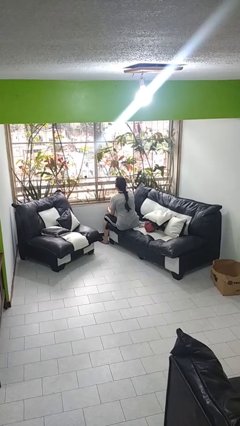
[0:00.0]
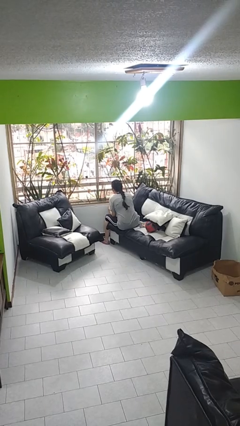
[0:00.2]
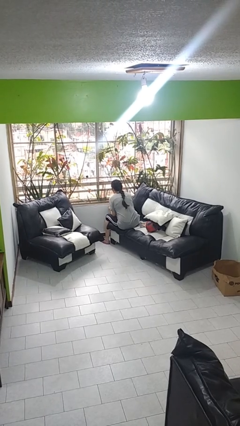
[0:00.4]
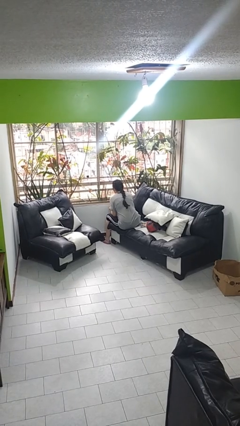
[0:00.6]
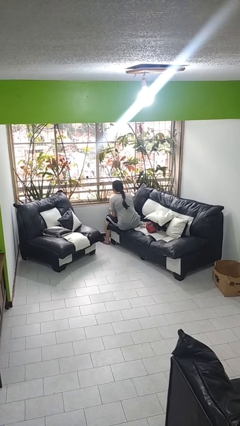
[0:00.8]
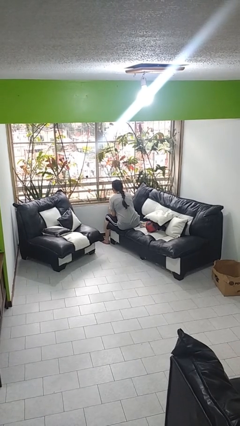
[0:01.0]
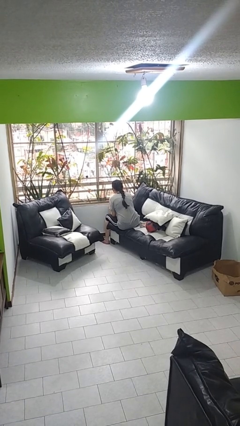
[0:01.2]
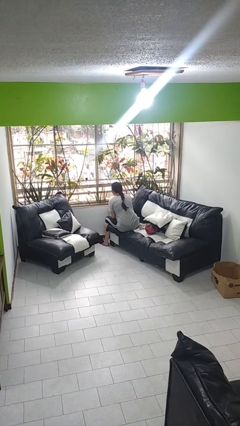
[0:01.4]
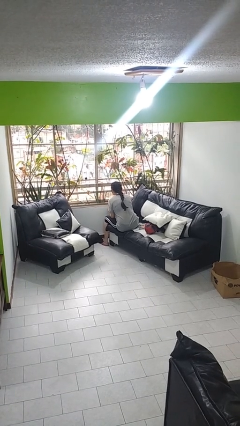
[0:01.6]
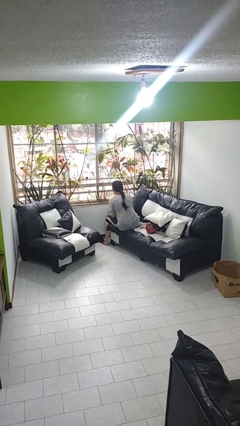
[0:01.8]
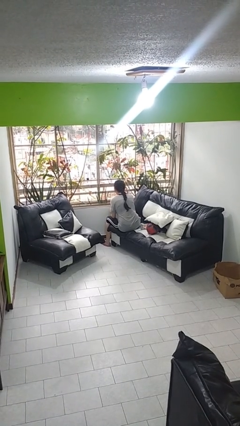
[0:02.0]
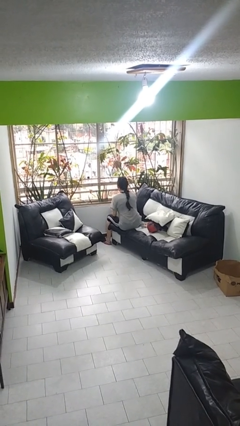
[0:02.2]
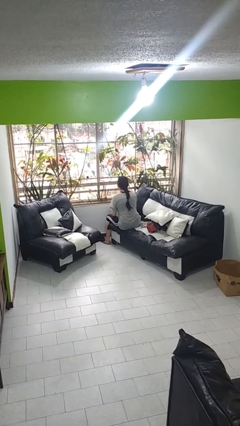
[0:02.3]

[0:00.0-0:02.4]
person looks at hands in lap

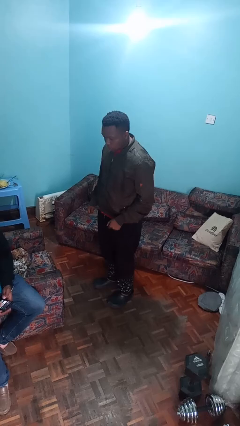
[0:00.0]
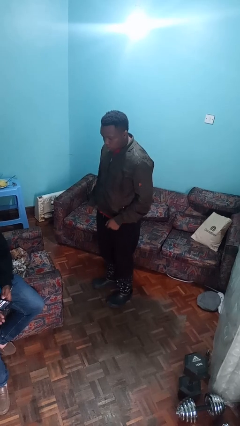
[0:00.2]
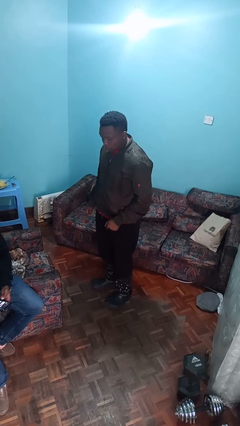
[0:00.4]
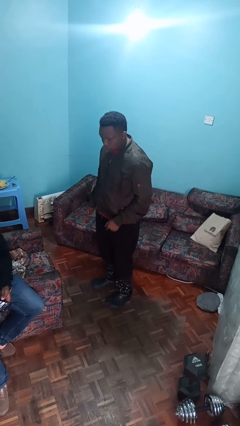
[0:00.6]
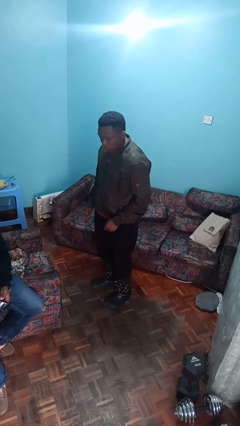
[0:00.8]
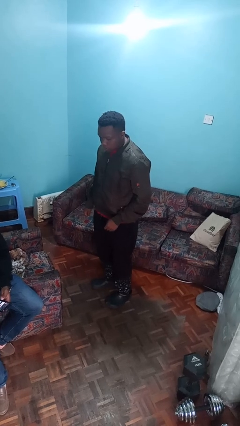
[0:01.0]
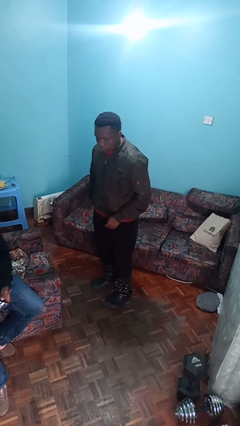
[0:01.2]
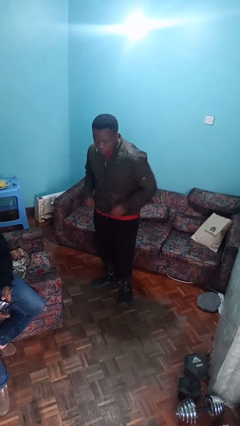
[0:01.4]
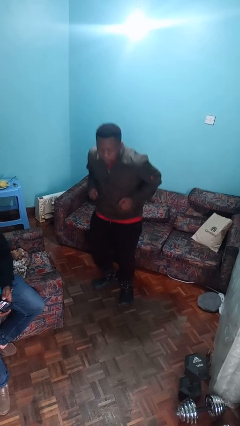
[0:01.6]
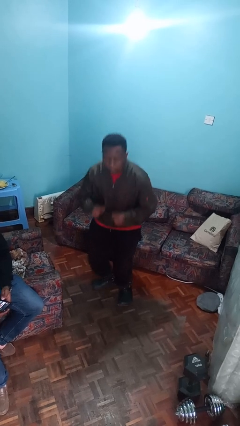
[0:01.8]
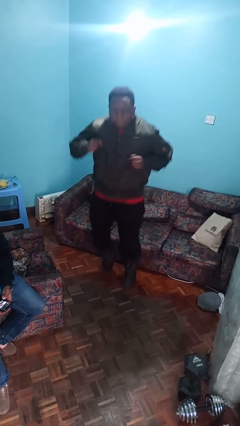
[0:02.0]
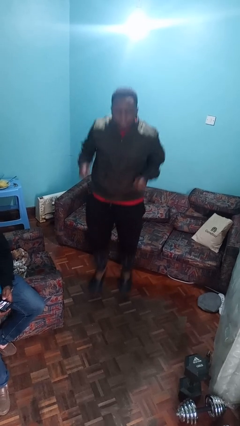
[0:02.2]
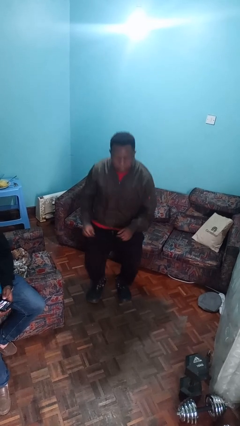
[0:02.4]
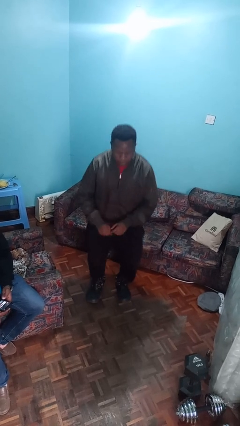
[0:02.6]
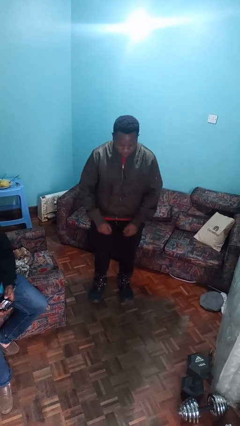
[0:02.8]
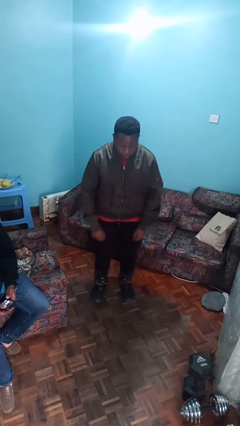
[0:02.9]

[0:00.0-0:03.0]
person jumps

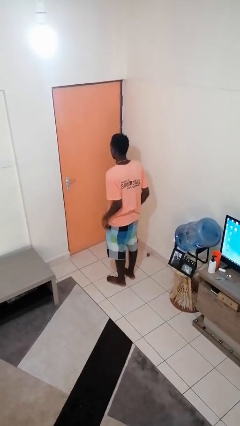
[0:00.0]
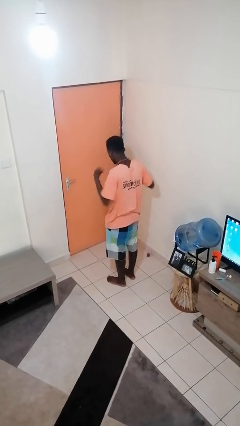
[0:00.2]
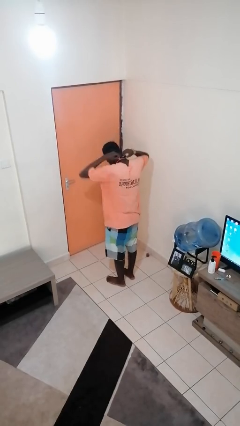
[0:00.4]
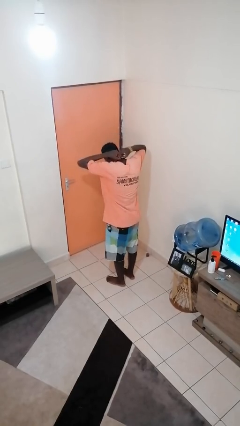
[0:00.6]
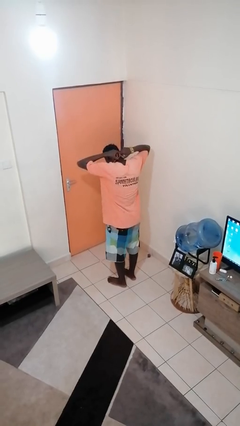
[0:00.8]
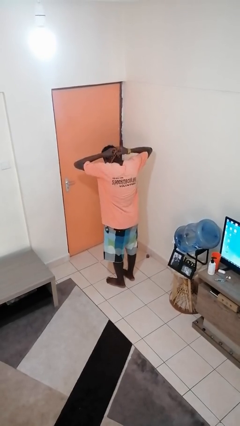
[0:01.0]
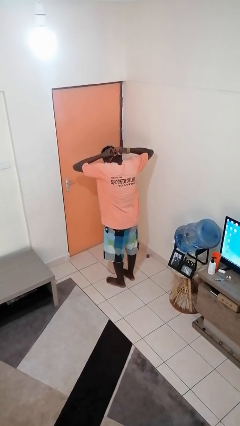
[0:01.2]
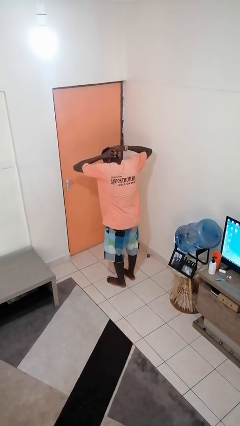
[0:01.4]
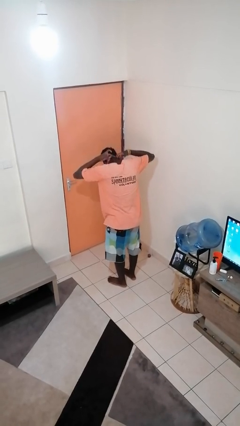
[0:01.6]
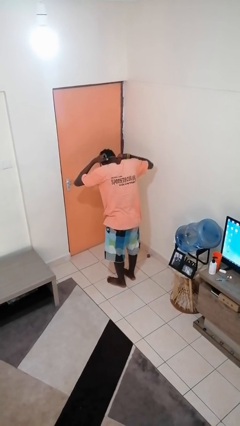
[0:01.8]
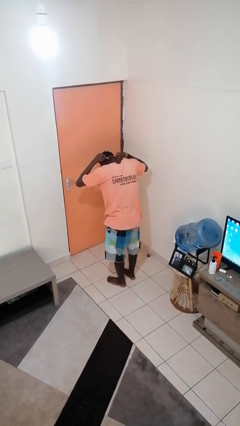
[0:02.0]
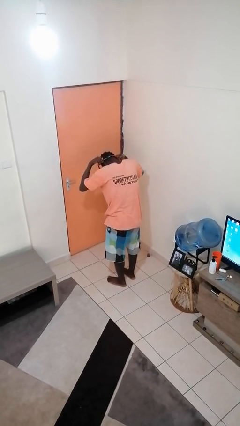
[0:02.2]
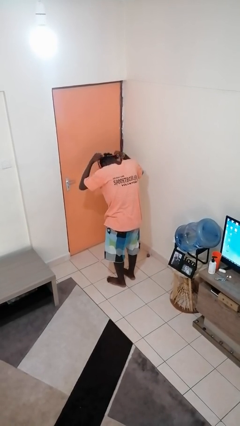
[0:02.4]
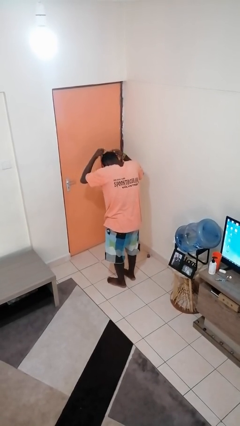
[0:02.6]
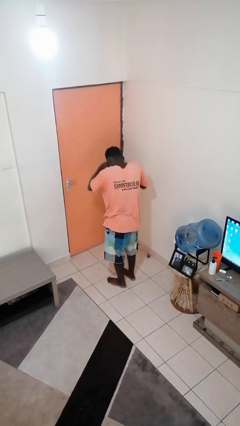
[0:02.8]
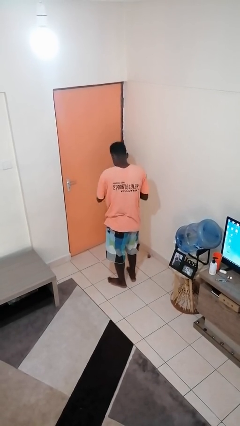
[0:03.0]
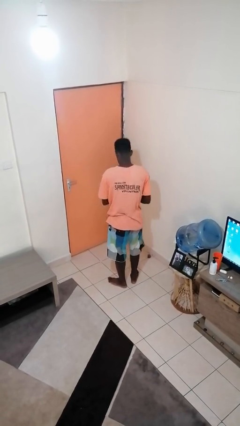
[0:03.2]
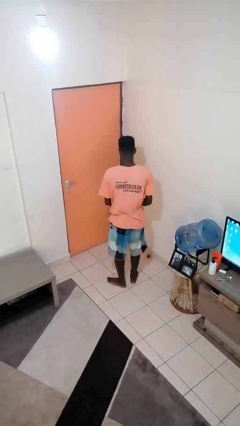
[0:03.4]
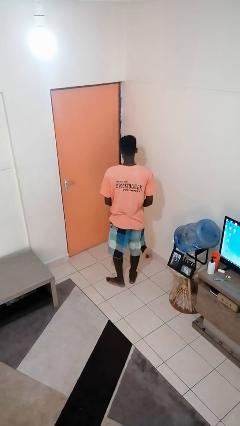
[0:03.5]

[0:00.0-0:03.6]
person takes off necklace

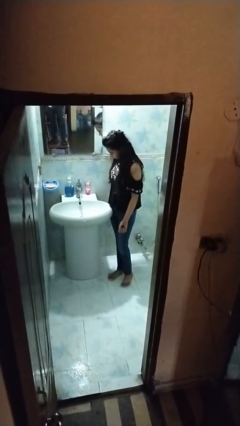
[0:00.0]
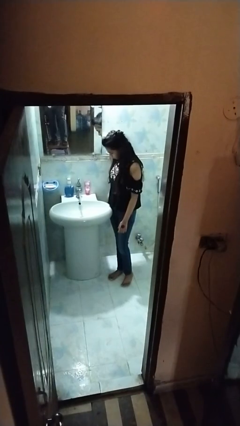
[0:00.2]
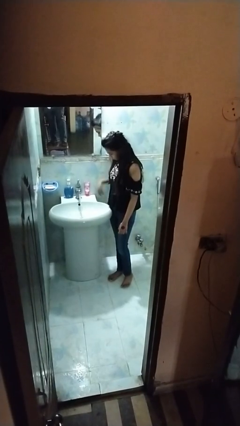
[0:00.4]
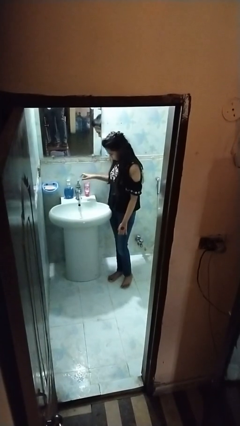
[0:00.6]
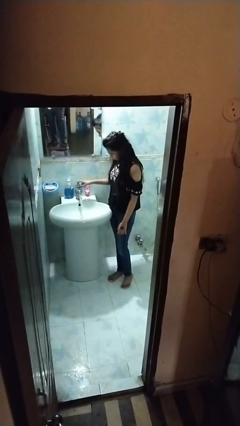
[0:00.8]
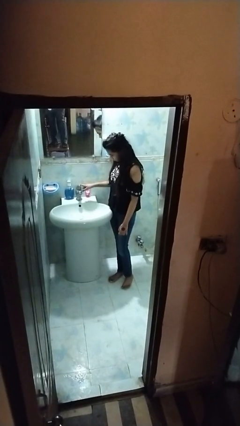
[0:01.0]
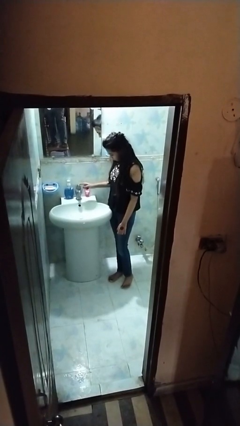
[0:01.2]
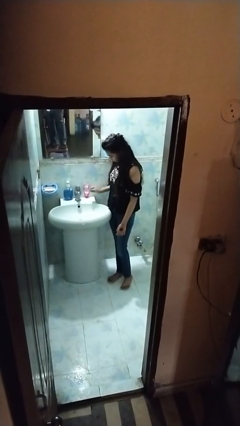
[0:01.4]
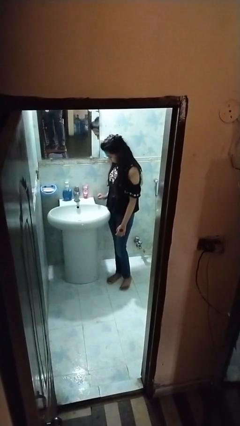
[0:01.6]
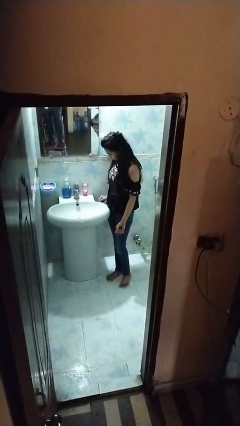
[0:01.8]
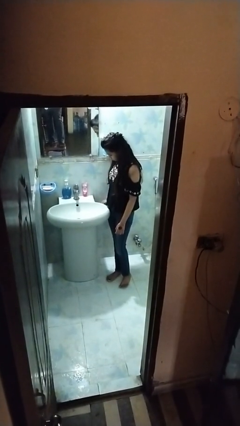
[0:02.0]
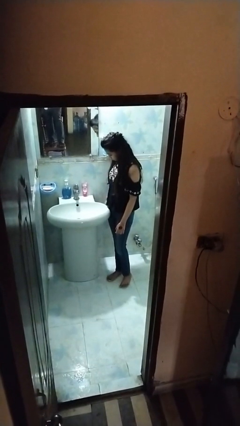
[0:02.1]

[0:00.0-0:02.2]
person turns off faucet

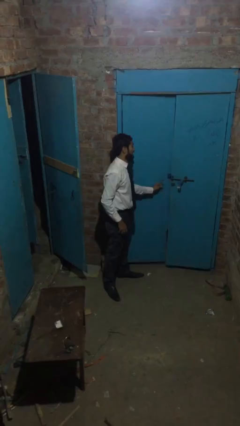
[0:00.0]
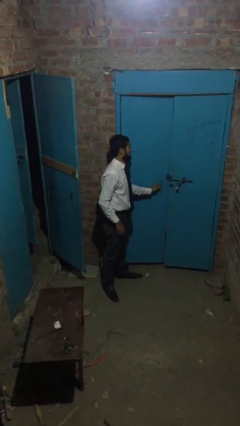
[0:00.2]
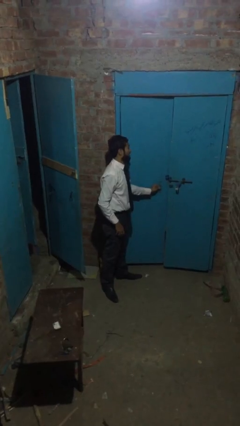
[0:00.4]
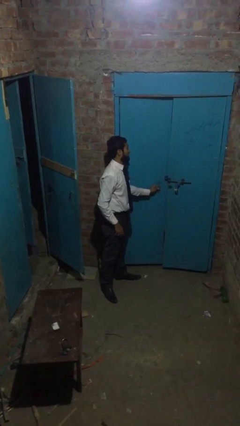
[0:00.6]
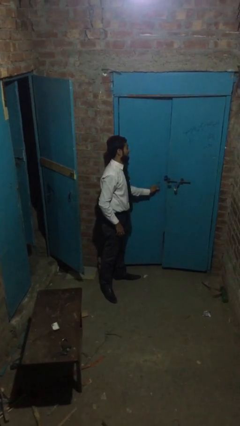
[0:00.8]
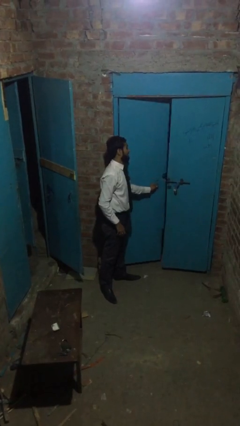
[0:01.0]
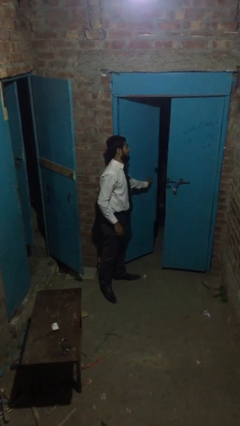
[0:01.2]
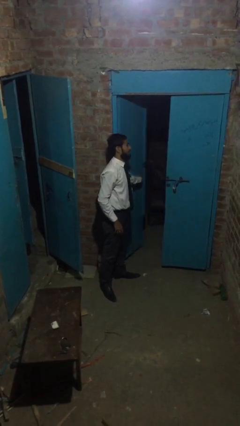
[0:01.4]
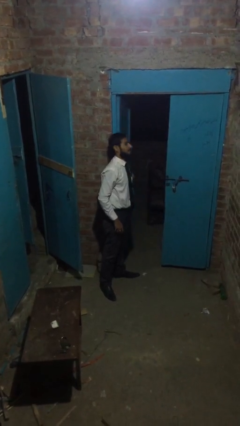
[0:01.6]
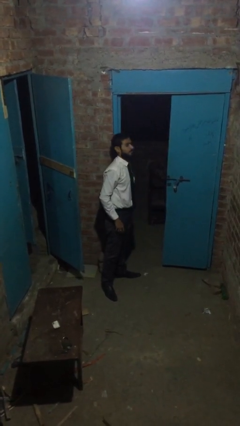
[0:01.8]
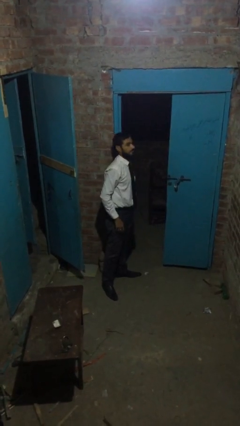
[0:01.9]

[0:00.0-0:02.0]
person opens facility door

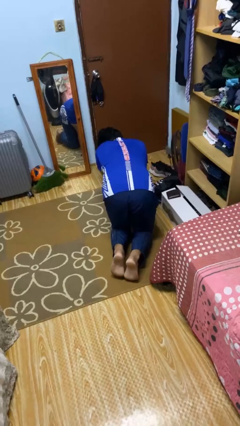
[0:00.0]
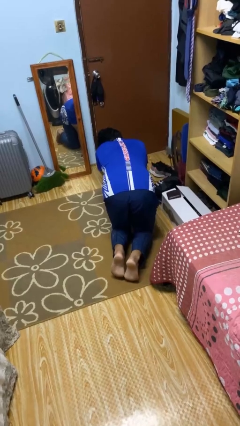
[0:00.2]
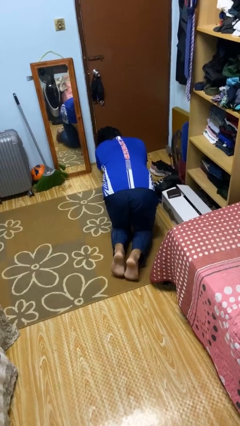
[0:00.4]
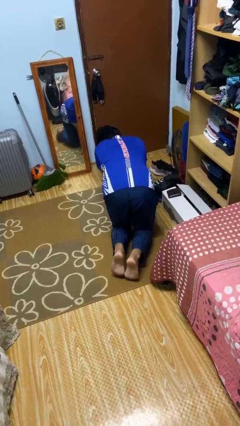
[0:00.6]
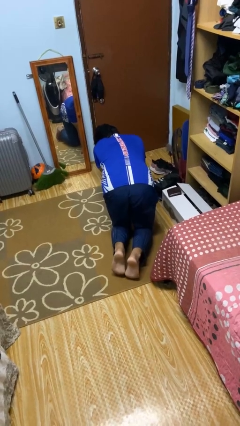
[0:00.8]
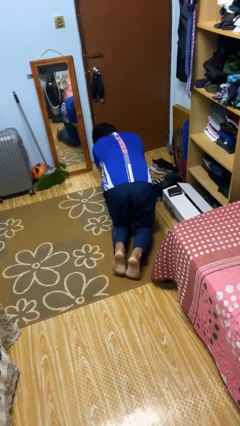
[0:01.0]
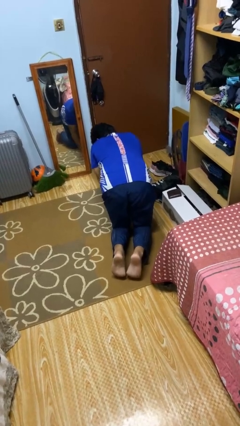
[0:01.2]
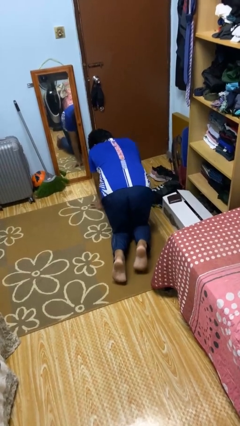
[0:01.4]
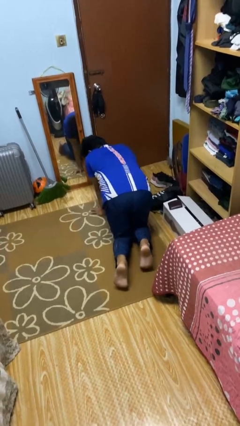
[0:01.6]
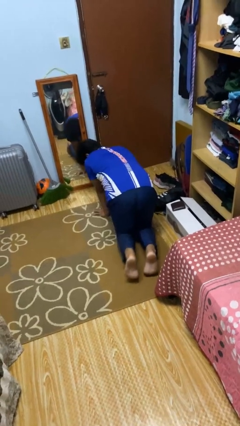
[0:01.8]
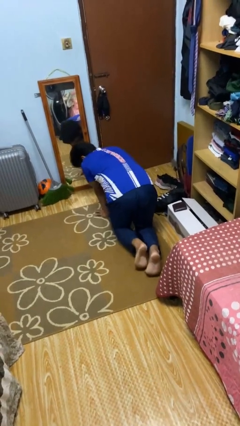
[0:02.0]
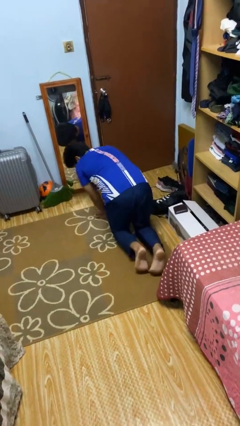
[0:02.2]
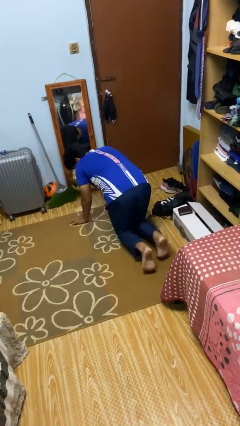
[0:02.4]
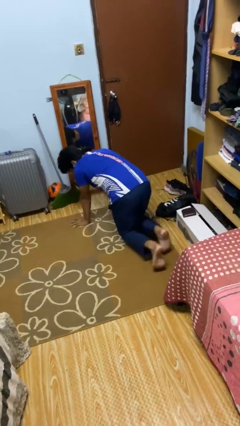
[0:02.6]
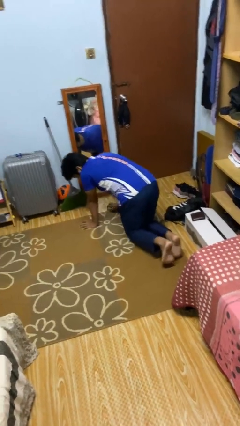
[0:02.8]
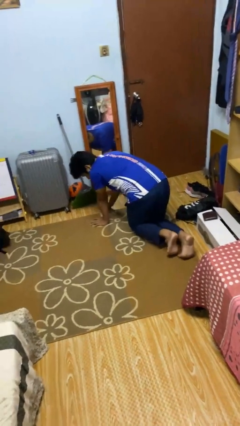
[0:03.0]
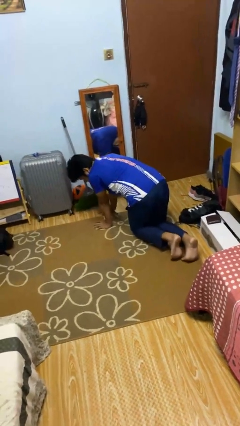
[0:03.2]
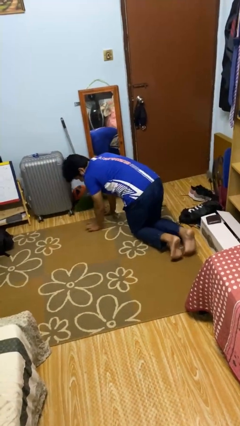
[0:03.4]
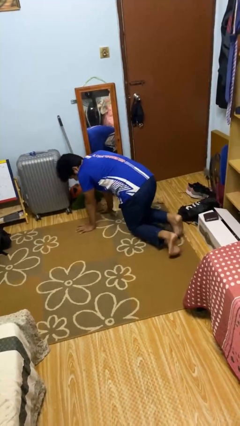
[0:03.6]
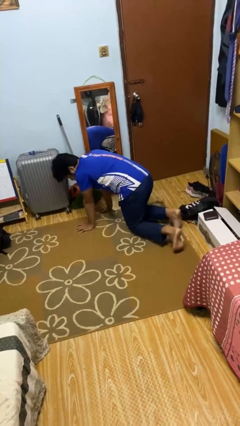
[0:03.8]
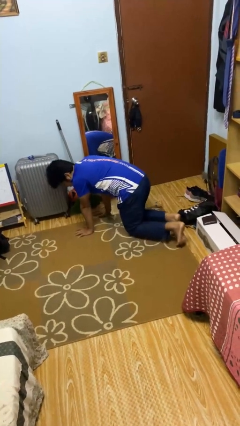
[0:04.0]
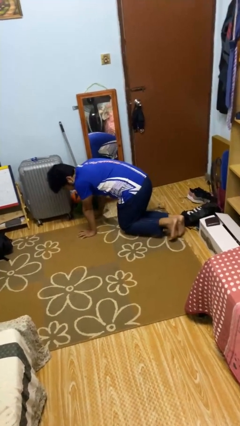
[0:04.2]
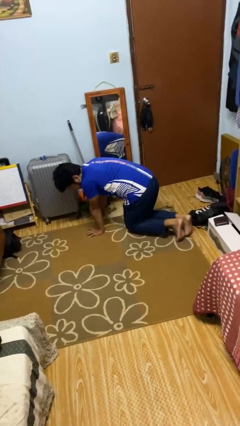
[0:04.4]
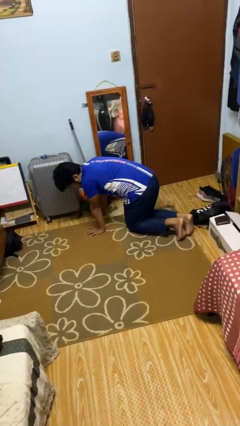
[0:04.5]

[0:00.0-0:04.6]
person crawls
